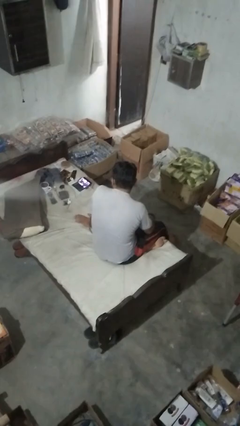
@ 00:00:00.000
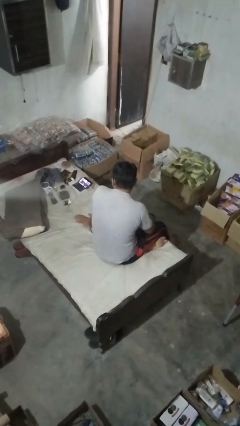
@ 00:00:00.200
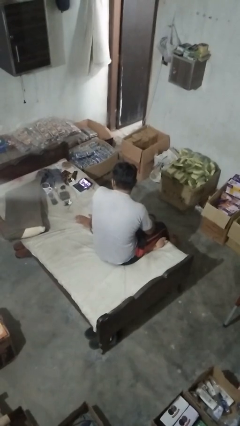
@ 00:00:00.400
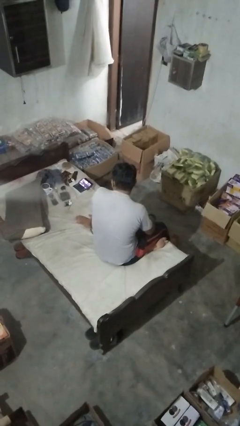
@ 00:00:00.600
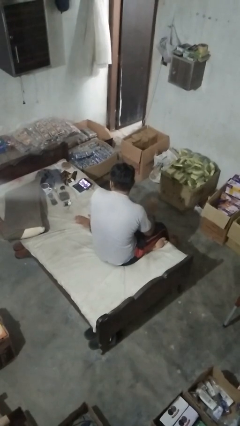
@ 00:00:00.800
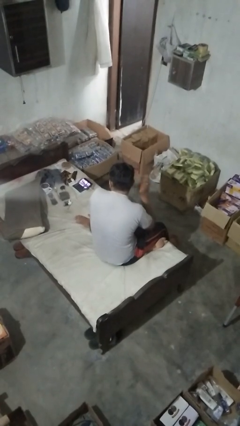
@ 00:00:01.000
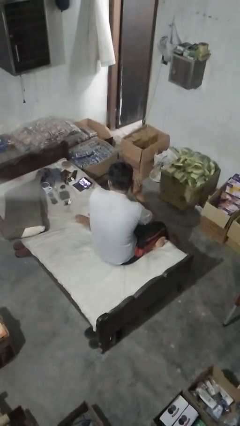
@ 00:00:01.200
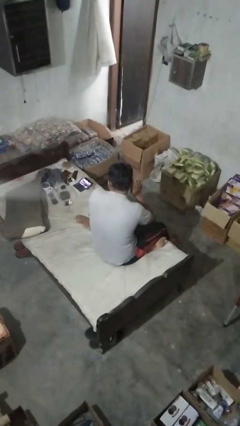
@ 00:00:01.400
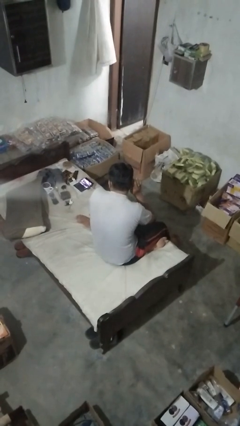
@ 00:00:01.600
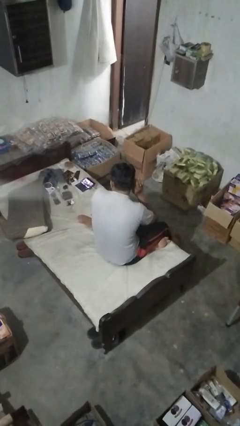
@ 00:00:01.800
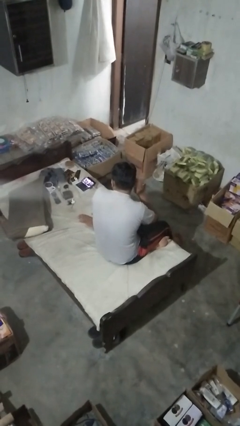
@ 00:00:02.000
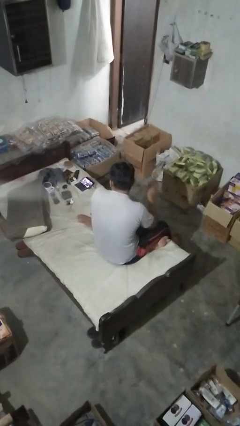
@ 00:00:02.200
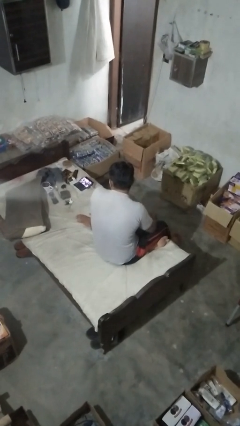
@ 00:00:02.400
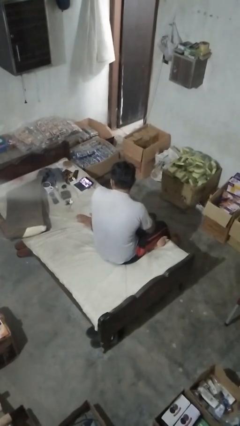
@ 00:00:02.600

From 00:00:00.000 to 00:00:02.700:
person gestures listen closely

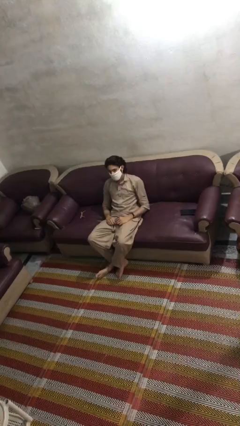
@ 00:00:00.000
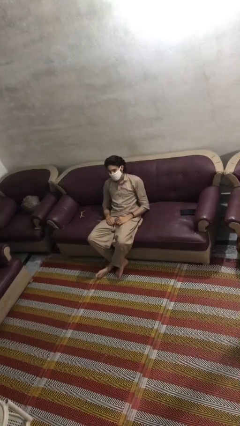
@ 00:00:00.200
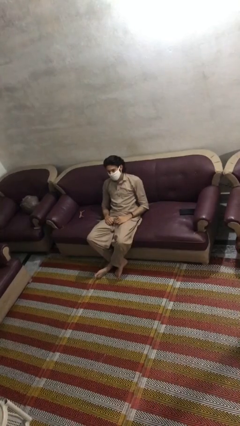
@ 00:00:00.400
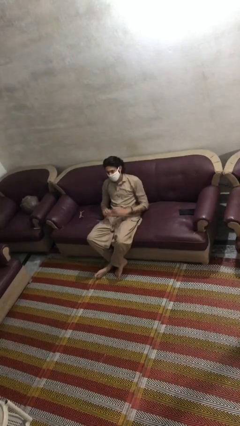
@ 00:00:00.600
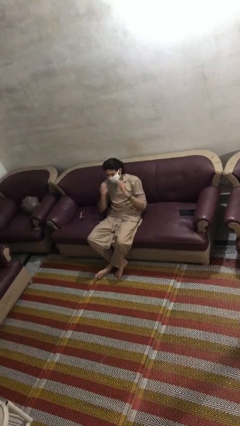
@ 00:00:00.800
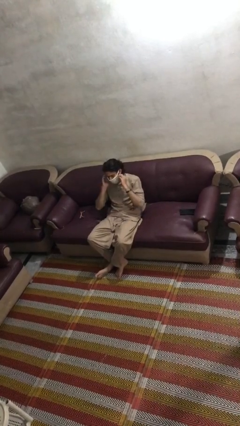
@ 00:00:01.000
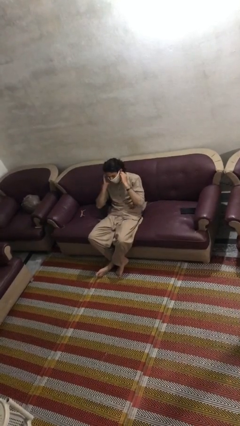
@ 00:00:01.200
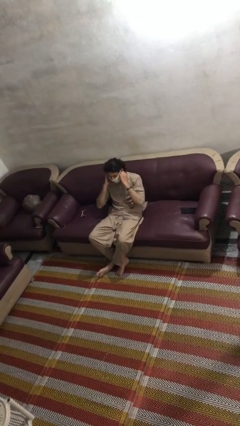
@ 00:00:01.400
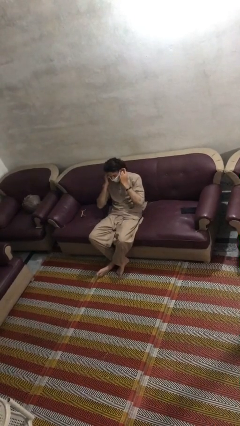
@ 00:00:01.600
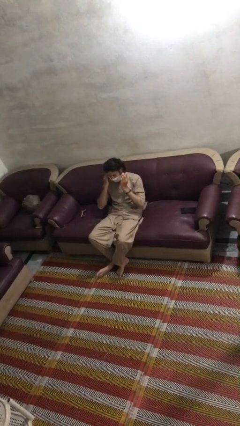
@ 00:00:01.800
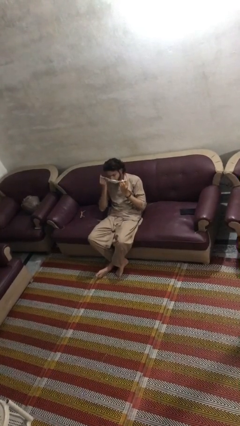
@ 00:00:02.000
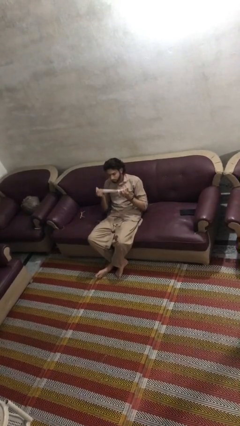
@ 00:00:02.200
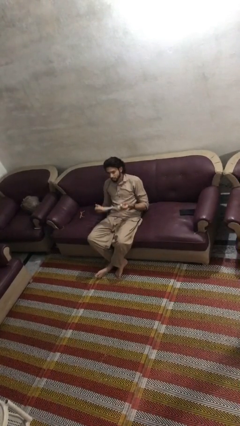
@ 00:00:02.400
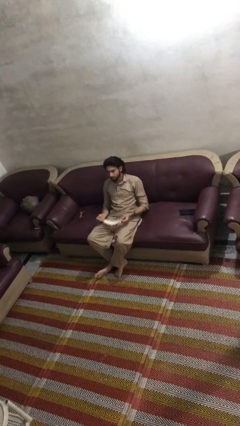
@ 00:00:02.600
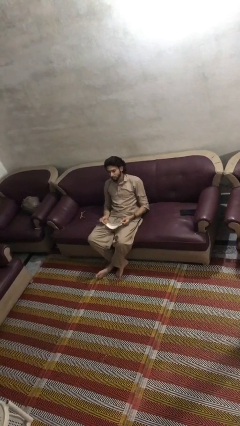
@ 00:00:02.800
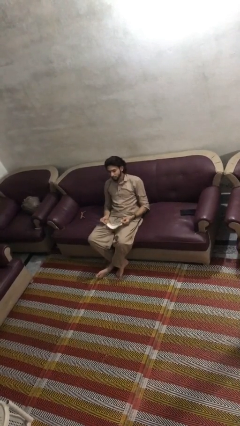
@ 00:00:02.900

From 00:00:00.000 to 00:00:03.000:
person takes off facemask

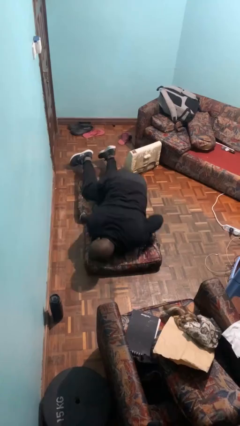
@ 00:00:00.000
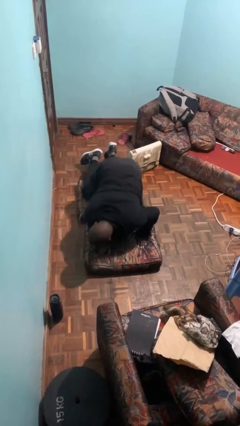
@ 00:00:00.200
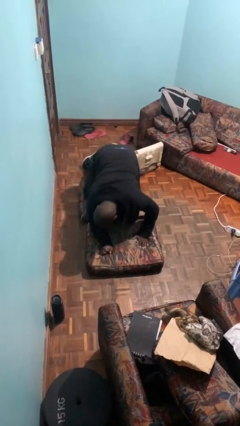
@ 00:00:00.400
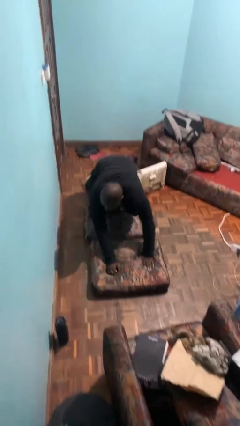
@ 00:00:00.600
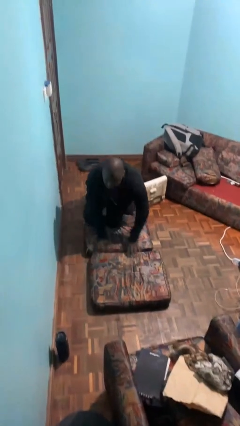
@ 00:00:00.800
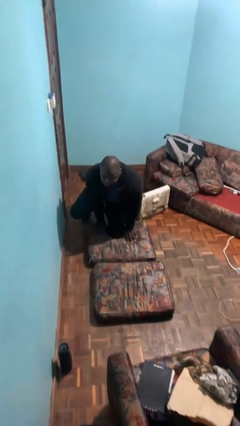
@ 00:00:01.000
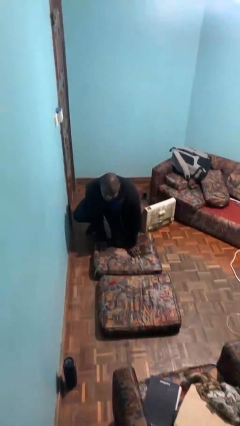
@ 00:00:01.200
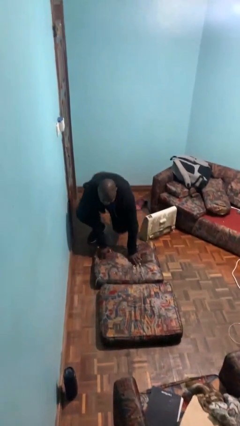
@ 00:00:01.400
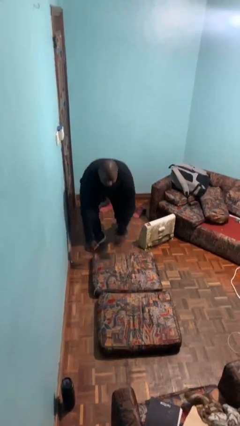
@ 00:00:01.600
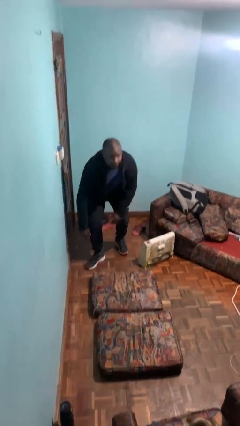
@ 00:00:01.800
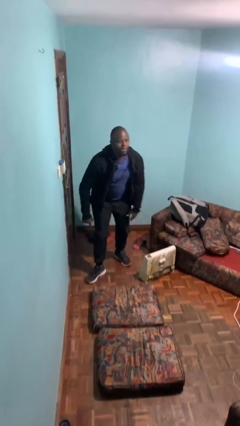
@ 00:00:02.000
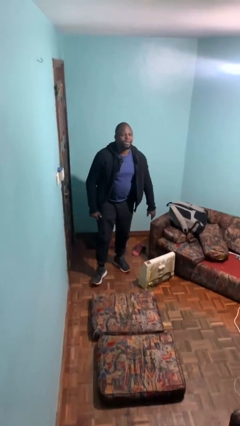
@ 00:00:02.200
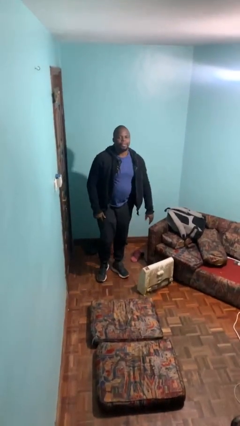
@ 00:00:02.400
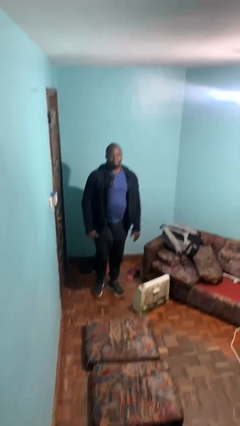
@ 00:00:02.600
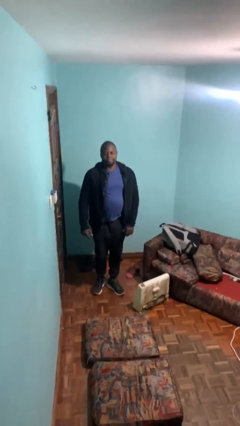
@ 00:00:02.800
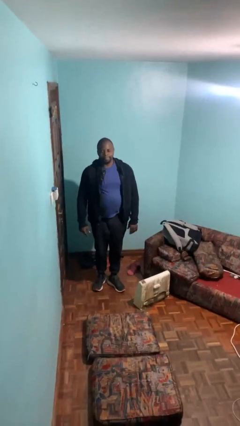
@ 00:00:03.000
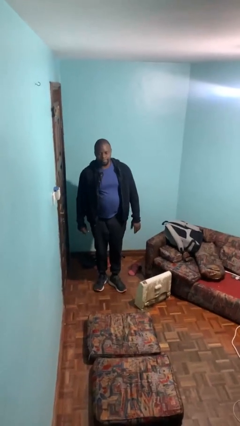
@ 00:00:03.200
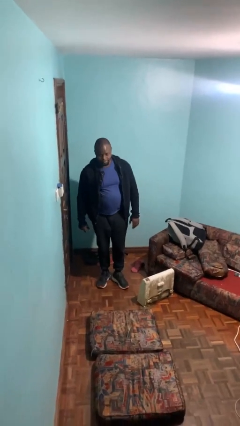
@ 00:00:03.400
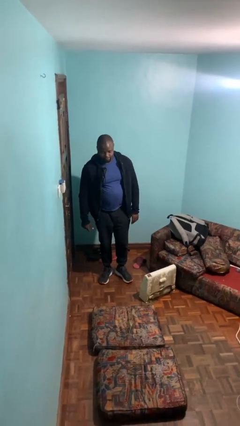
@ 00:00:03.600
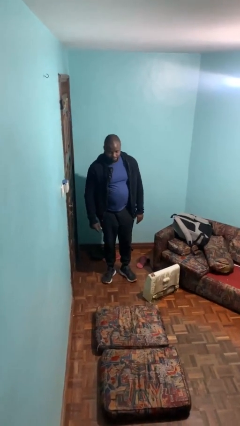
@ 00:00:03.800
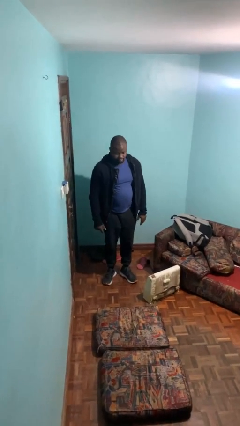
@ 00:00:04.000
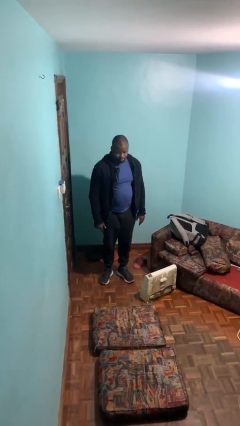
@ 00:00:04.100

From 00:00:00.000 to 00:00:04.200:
person stands up from floor

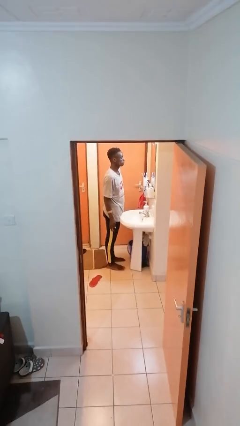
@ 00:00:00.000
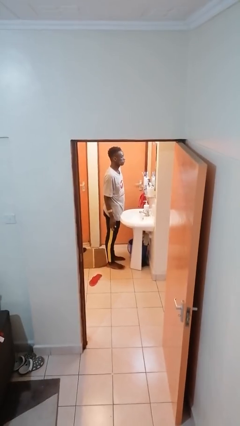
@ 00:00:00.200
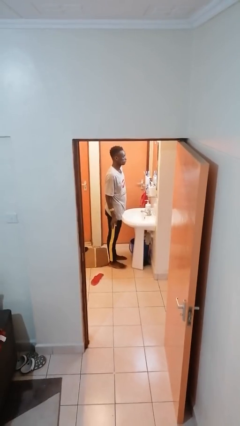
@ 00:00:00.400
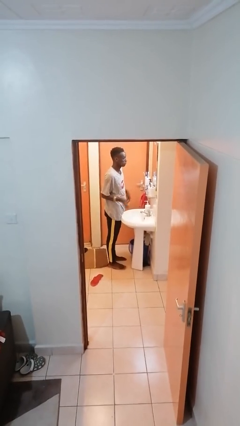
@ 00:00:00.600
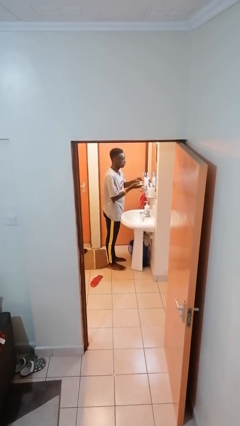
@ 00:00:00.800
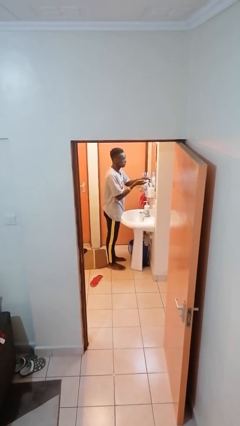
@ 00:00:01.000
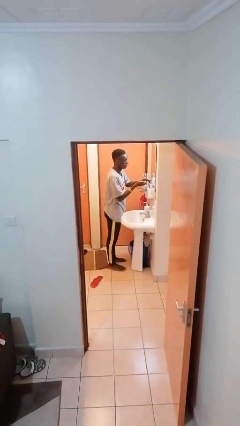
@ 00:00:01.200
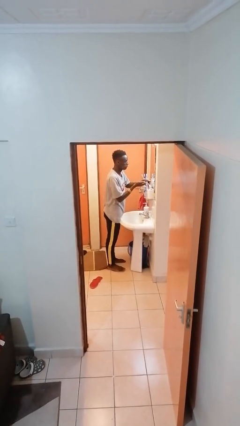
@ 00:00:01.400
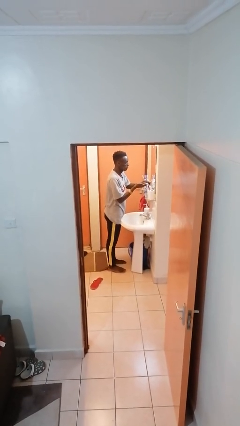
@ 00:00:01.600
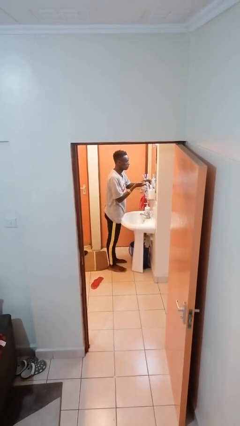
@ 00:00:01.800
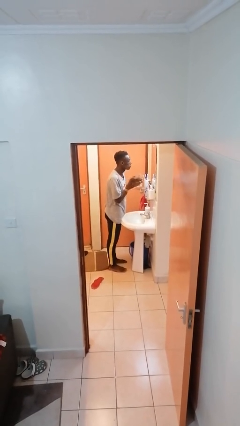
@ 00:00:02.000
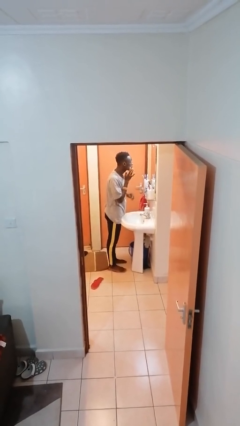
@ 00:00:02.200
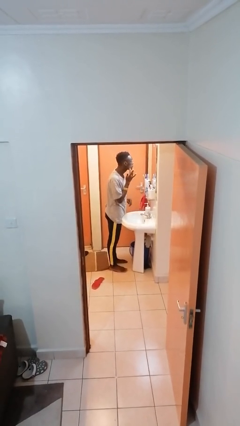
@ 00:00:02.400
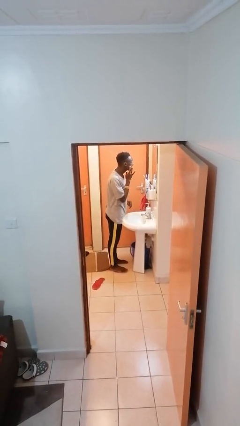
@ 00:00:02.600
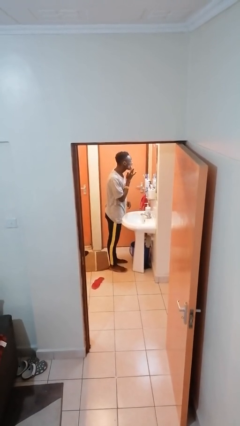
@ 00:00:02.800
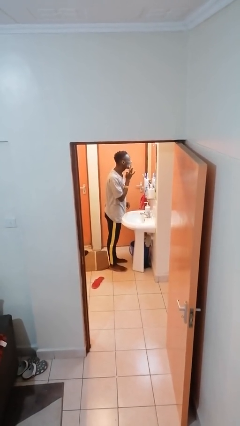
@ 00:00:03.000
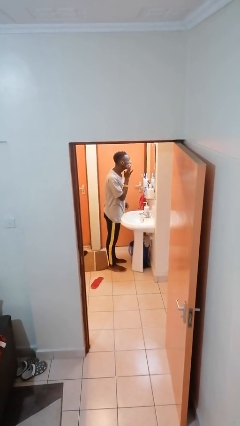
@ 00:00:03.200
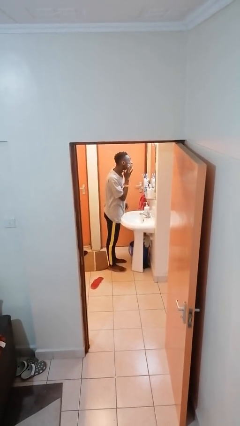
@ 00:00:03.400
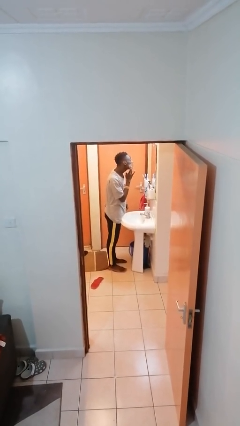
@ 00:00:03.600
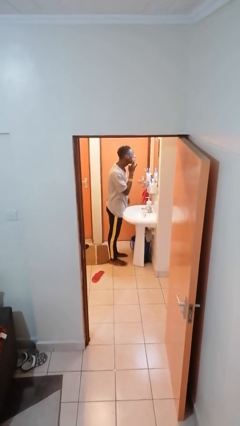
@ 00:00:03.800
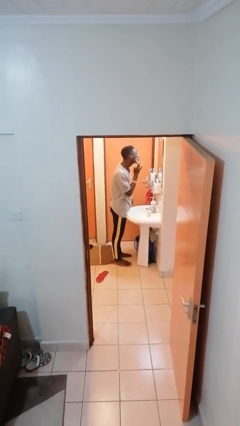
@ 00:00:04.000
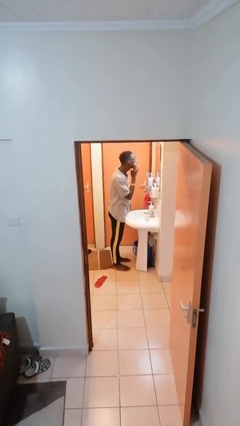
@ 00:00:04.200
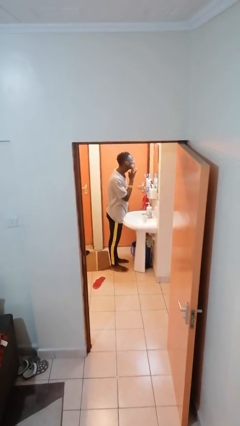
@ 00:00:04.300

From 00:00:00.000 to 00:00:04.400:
person applies shaving cream

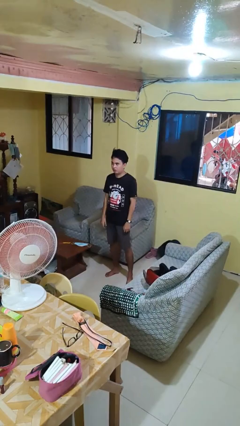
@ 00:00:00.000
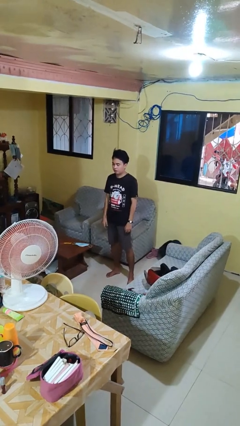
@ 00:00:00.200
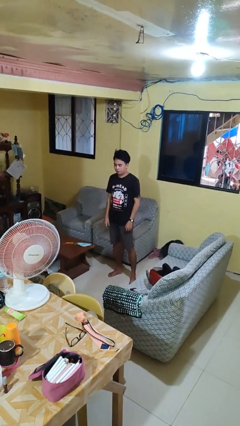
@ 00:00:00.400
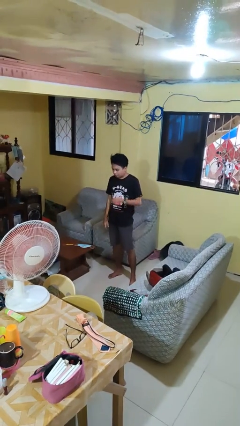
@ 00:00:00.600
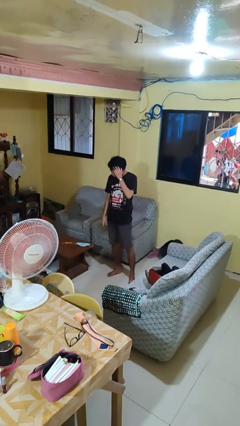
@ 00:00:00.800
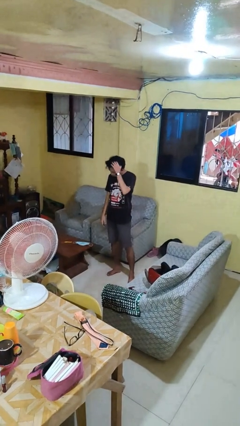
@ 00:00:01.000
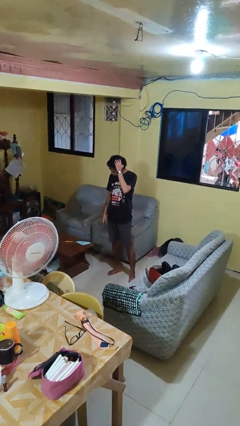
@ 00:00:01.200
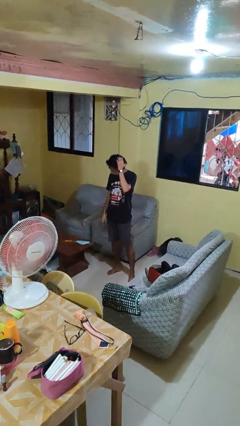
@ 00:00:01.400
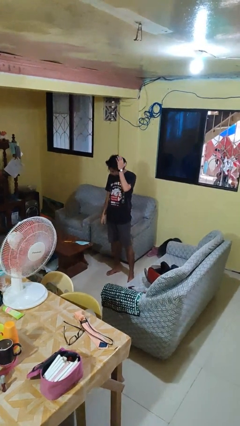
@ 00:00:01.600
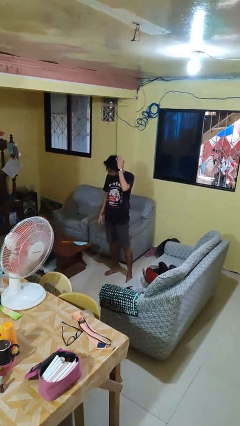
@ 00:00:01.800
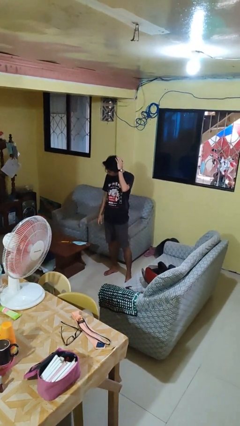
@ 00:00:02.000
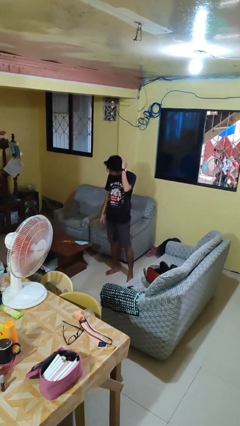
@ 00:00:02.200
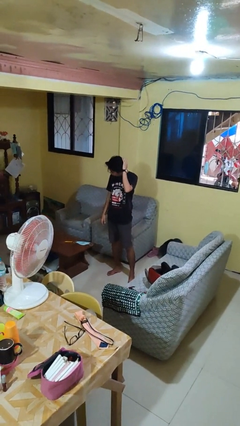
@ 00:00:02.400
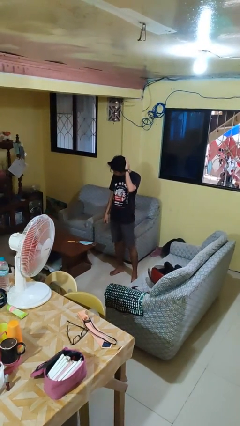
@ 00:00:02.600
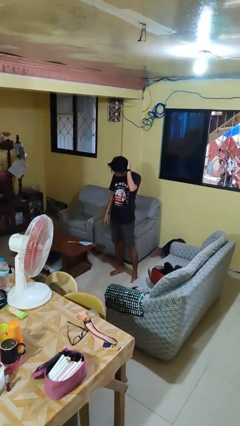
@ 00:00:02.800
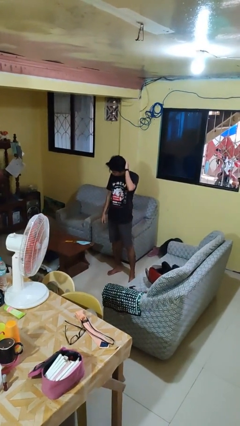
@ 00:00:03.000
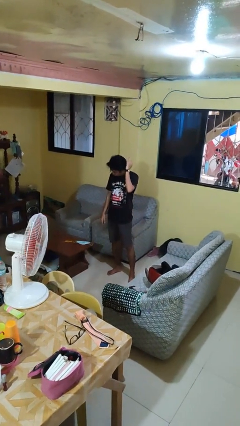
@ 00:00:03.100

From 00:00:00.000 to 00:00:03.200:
person pats head

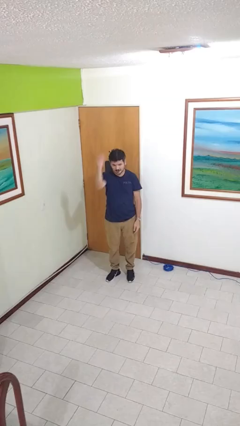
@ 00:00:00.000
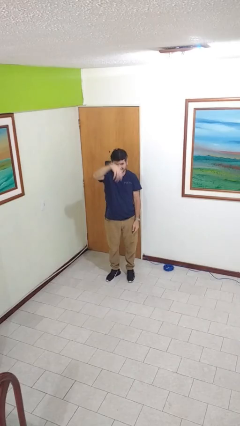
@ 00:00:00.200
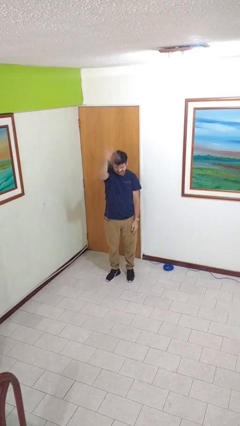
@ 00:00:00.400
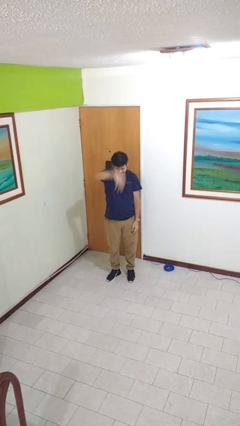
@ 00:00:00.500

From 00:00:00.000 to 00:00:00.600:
person gestures come here
